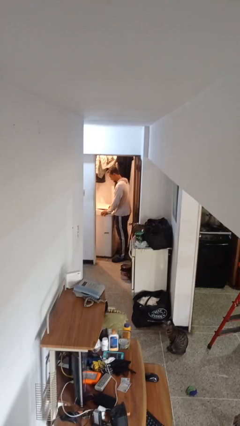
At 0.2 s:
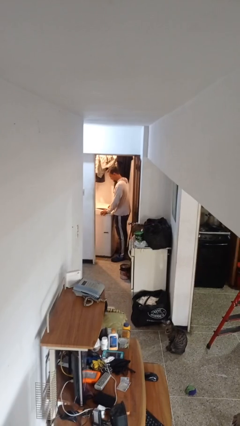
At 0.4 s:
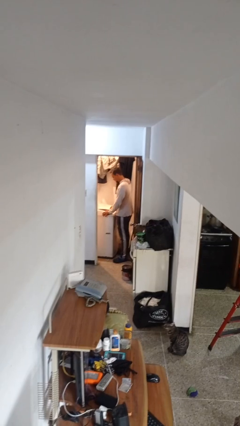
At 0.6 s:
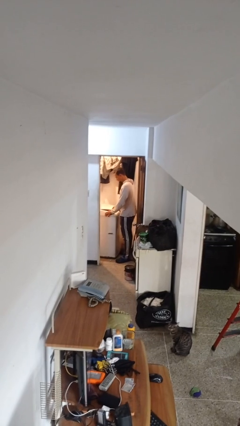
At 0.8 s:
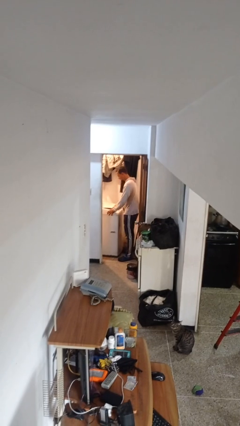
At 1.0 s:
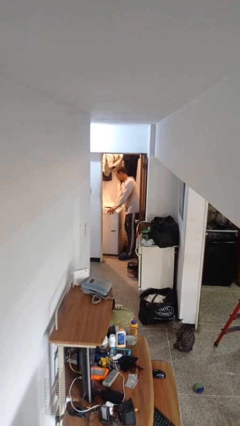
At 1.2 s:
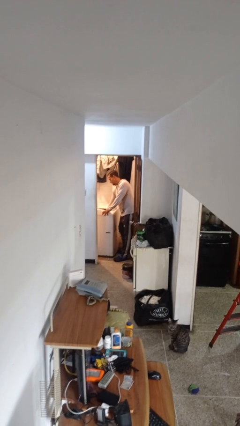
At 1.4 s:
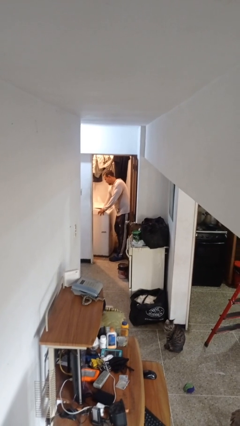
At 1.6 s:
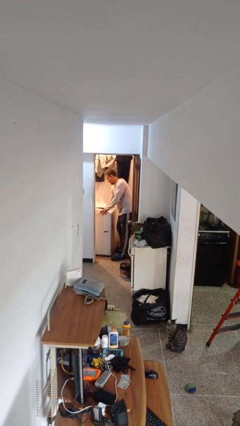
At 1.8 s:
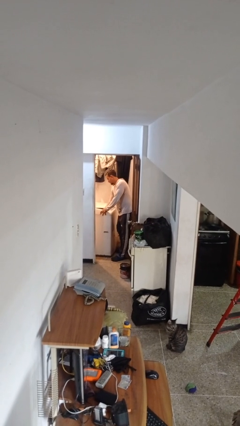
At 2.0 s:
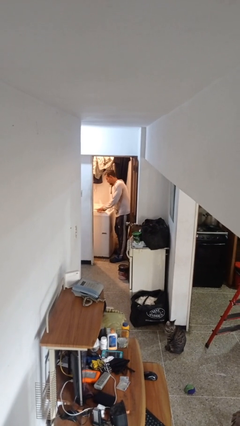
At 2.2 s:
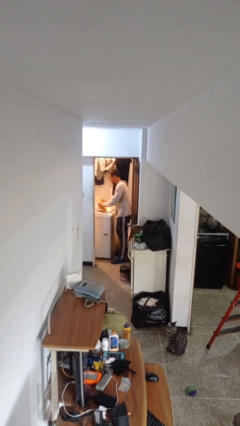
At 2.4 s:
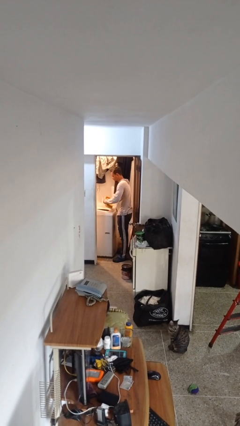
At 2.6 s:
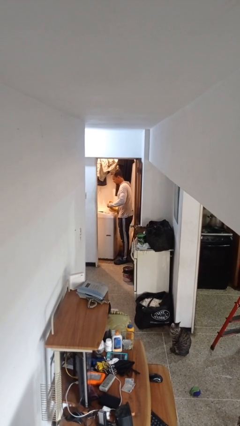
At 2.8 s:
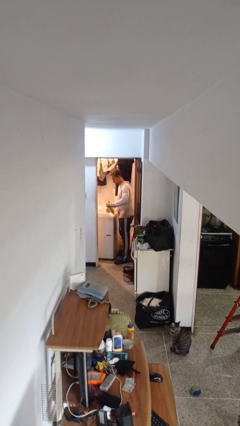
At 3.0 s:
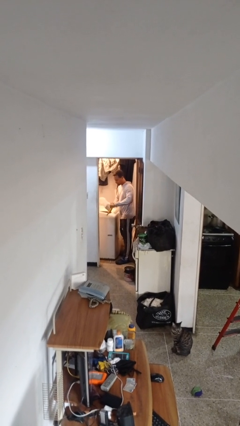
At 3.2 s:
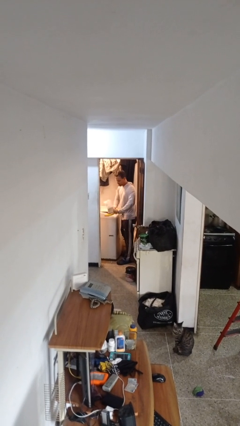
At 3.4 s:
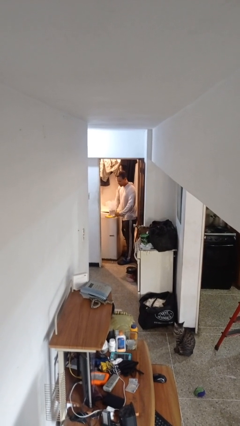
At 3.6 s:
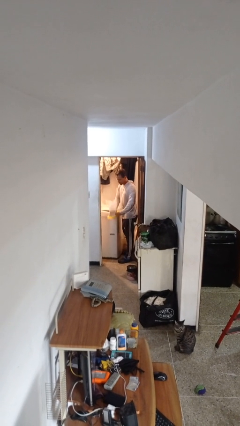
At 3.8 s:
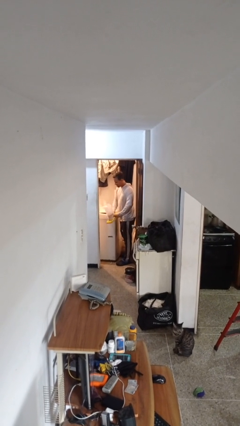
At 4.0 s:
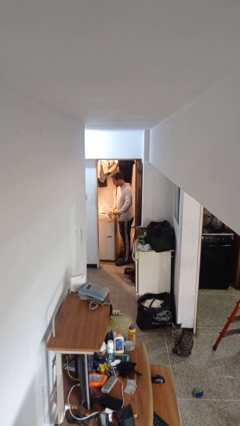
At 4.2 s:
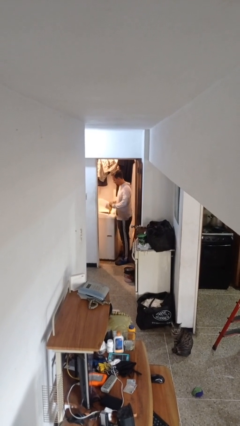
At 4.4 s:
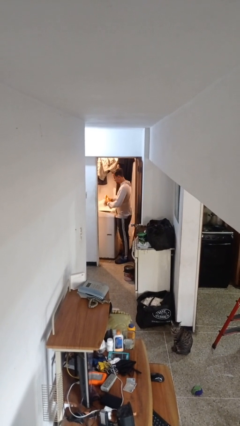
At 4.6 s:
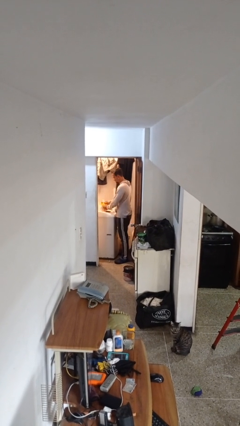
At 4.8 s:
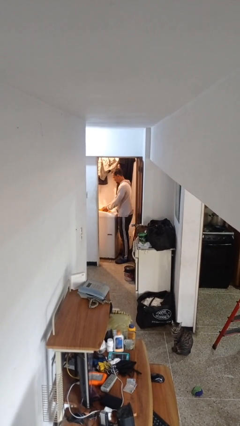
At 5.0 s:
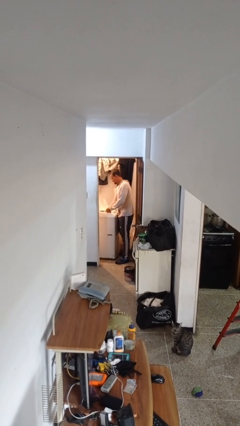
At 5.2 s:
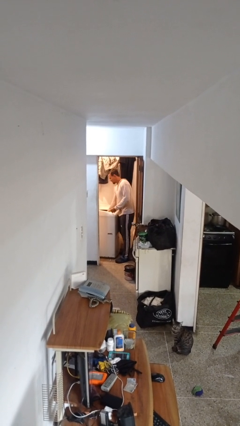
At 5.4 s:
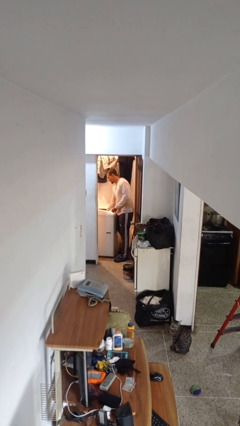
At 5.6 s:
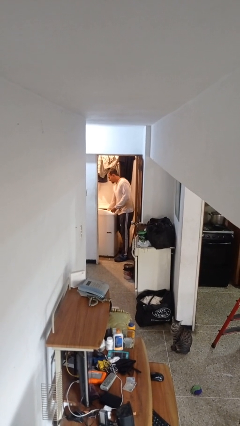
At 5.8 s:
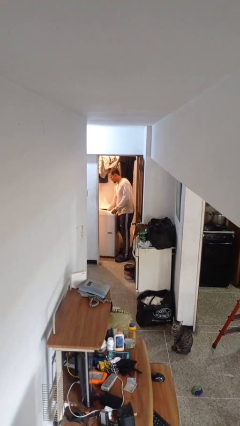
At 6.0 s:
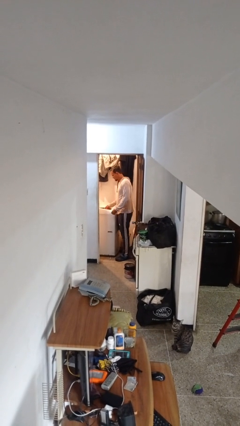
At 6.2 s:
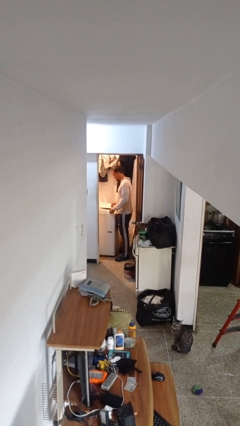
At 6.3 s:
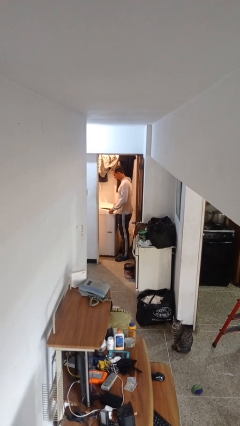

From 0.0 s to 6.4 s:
person cleans dryer lint trap

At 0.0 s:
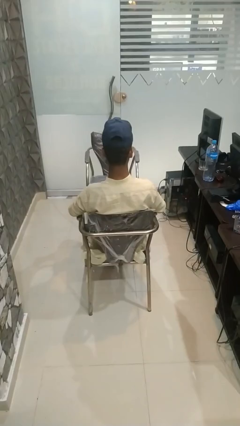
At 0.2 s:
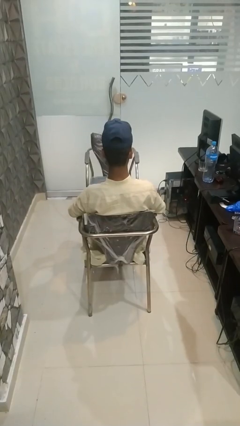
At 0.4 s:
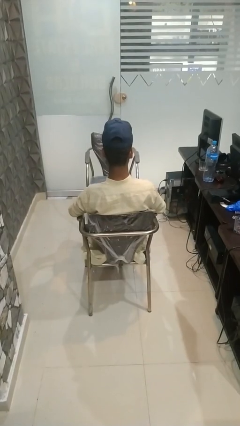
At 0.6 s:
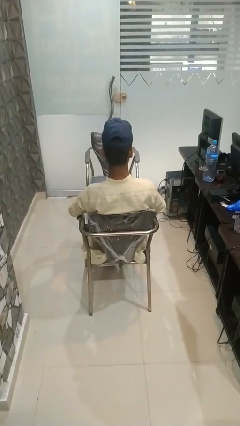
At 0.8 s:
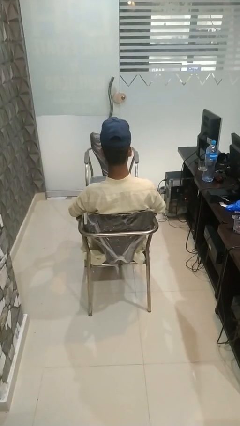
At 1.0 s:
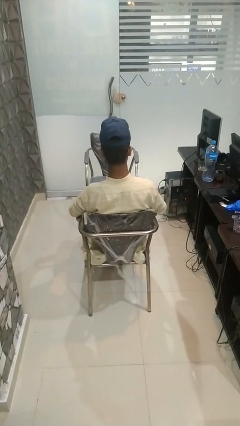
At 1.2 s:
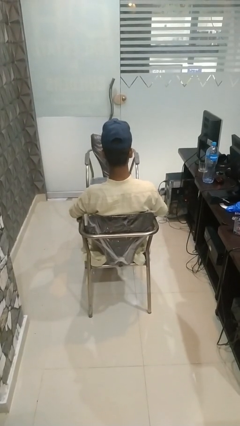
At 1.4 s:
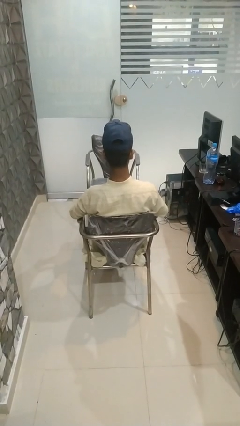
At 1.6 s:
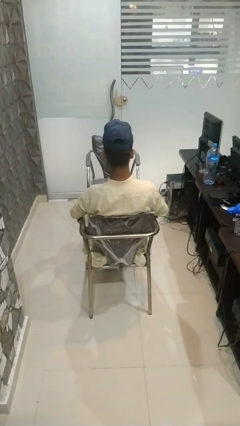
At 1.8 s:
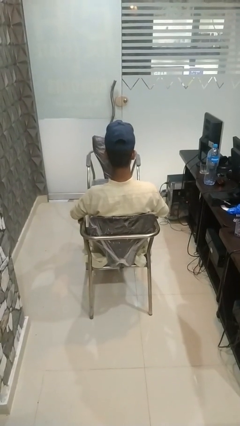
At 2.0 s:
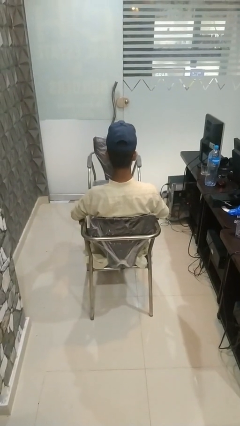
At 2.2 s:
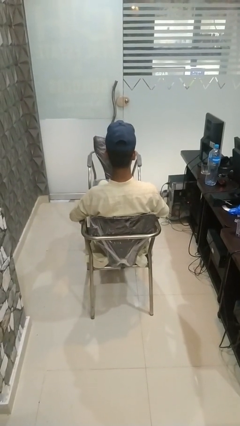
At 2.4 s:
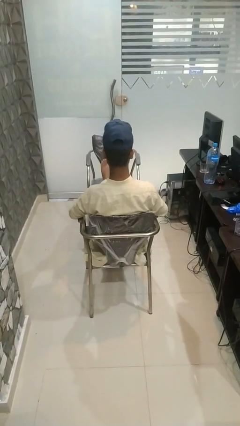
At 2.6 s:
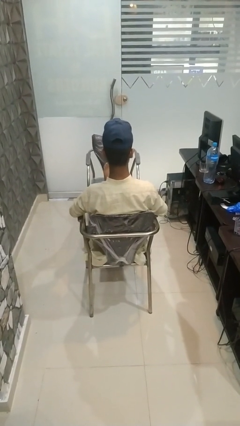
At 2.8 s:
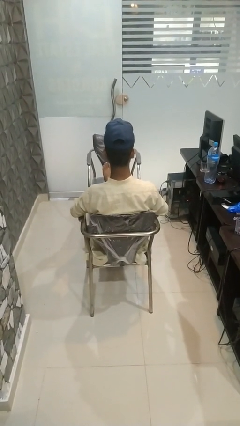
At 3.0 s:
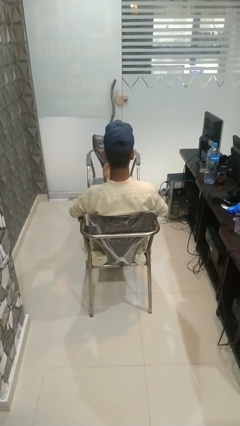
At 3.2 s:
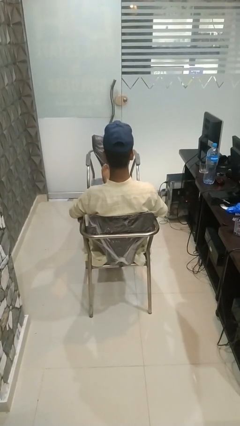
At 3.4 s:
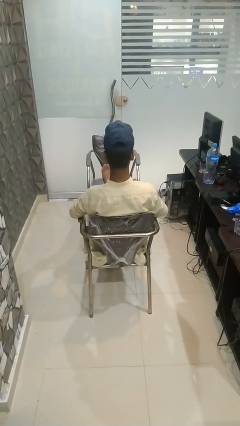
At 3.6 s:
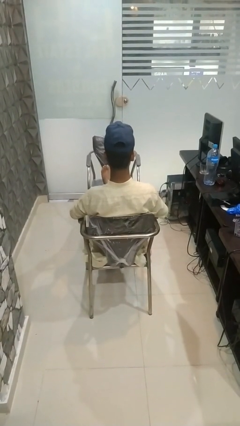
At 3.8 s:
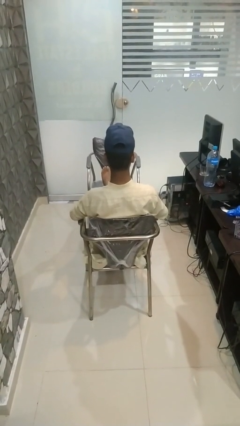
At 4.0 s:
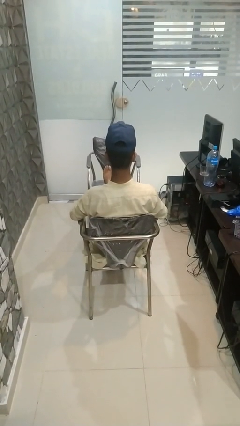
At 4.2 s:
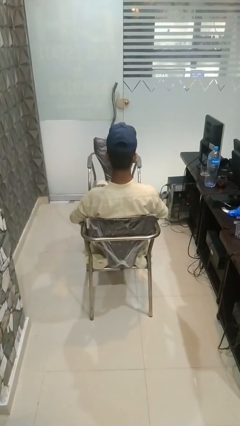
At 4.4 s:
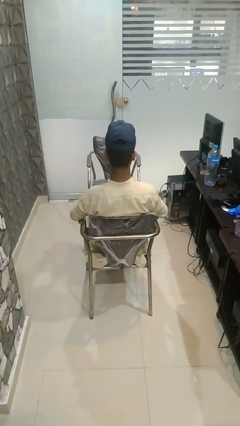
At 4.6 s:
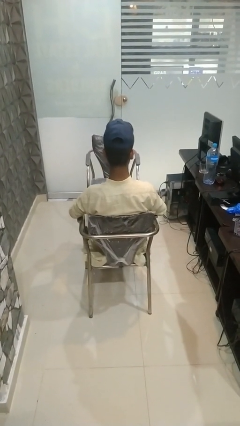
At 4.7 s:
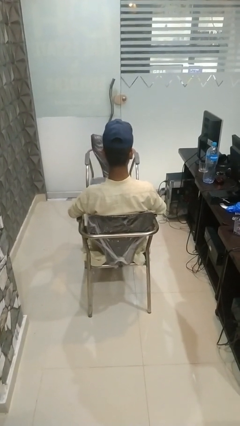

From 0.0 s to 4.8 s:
person puts feet up

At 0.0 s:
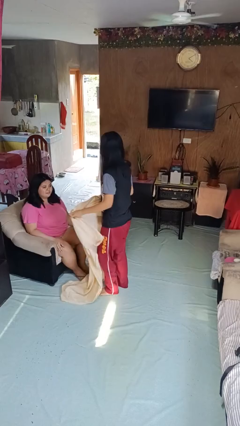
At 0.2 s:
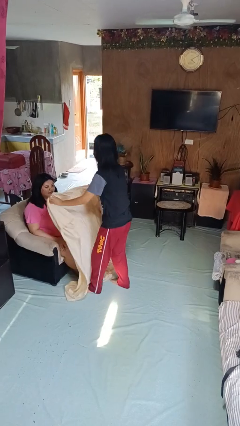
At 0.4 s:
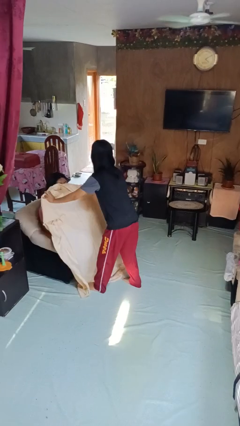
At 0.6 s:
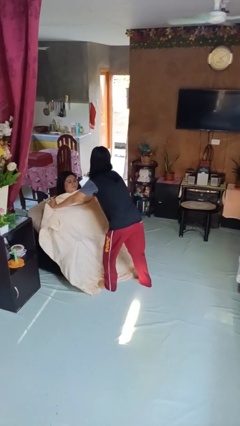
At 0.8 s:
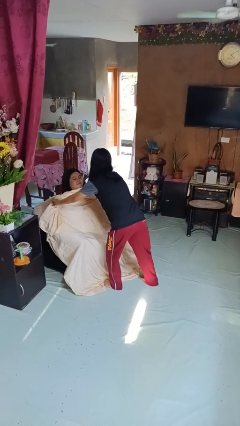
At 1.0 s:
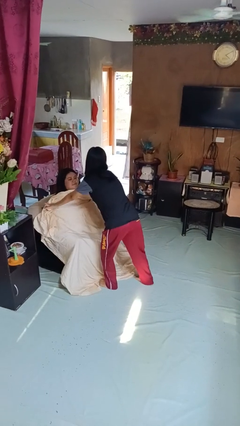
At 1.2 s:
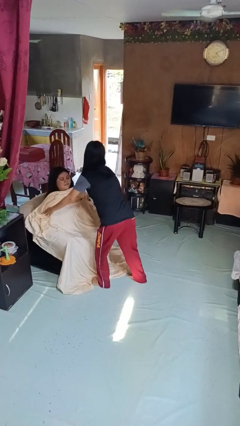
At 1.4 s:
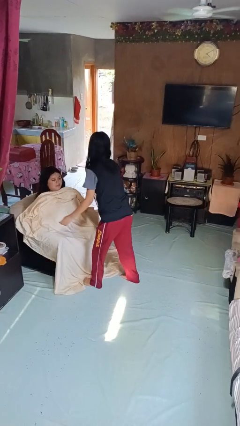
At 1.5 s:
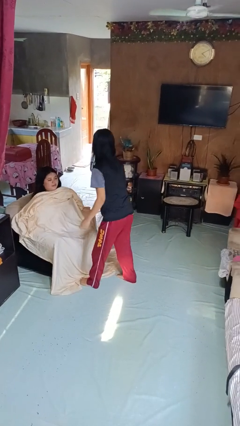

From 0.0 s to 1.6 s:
person covers friend with blanket

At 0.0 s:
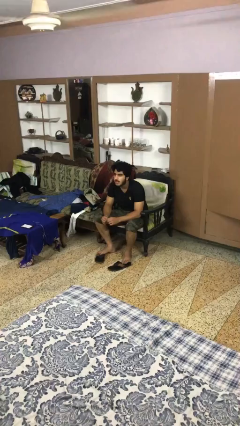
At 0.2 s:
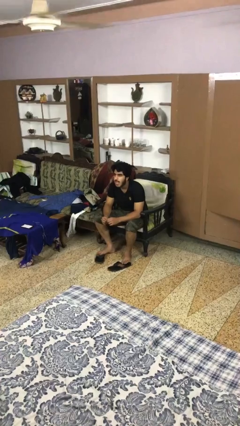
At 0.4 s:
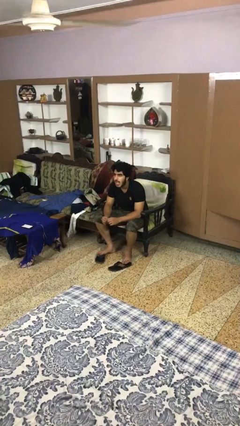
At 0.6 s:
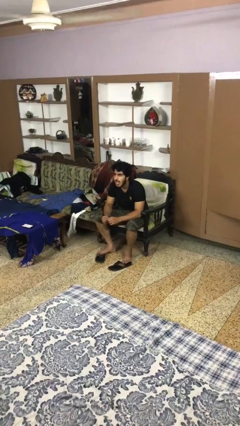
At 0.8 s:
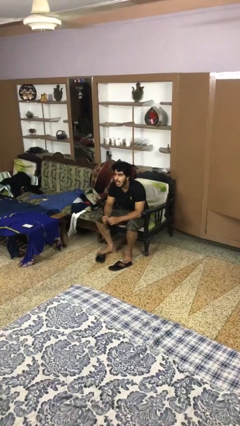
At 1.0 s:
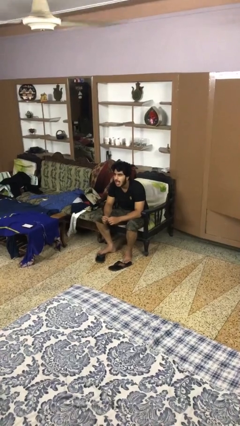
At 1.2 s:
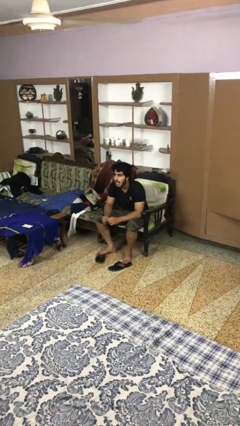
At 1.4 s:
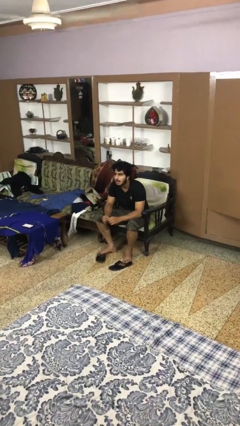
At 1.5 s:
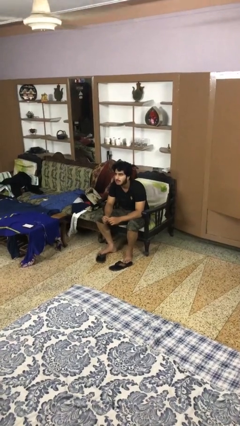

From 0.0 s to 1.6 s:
person sticks out tongue

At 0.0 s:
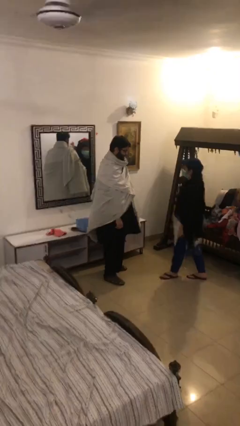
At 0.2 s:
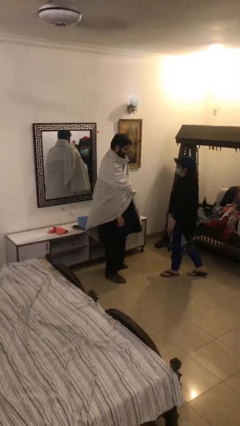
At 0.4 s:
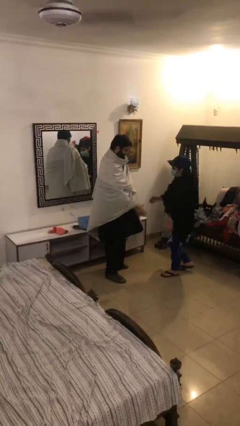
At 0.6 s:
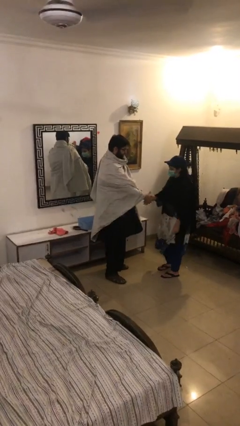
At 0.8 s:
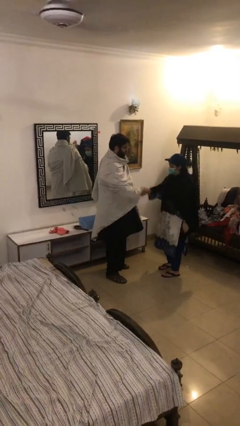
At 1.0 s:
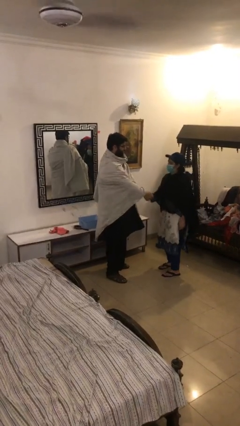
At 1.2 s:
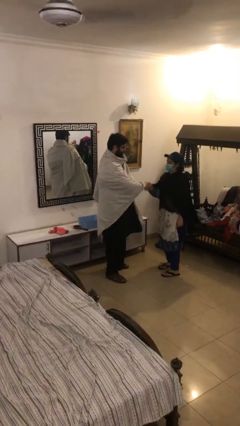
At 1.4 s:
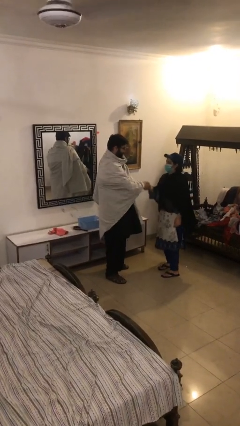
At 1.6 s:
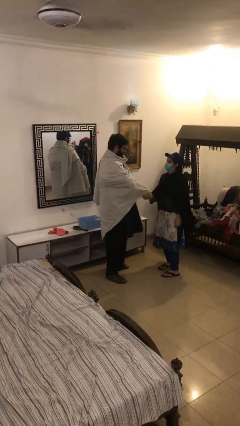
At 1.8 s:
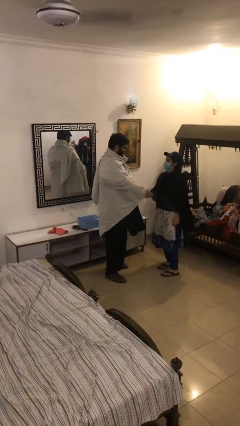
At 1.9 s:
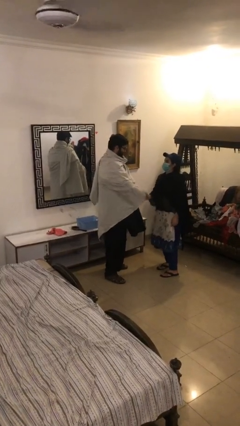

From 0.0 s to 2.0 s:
person shakes hand

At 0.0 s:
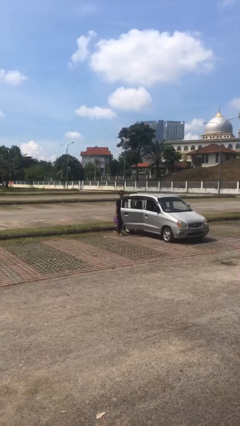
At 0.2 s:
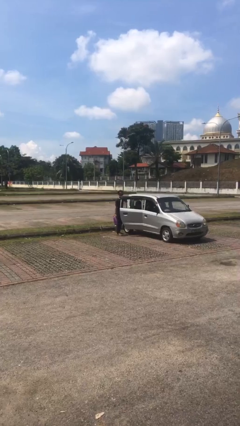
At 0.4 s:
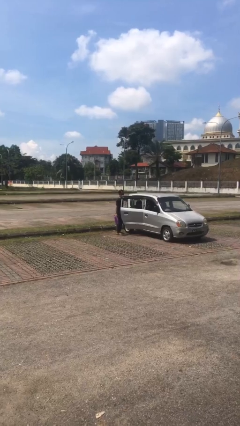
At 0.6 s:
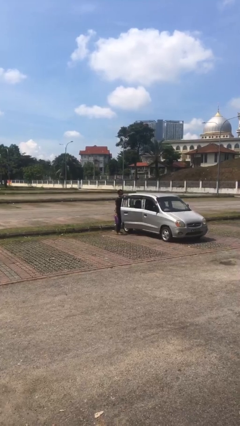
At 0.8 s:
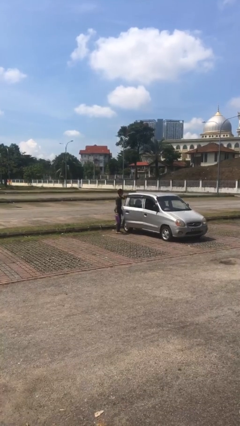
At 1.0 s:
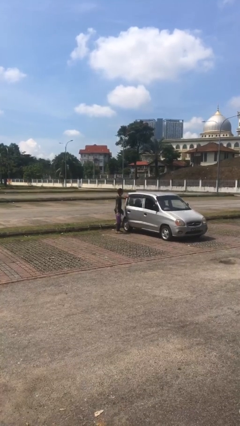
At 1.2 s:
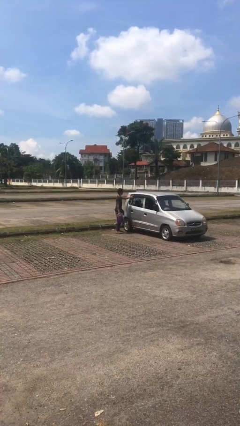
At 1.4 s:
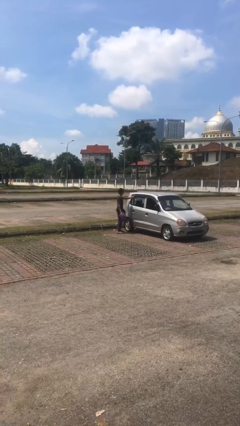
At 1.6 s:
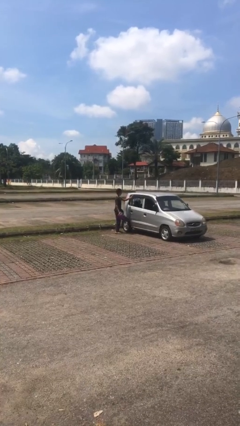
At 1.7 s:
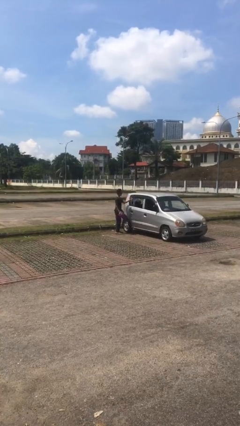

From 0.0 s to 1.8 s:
person closes car door
